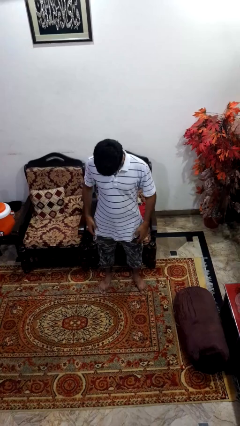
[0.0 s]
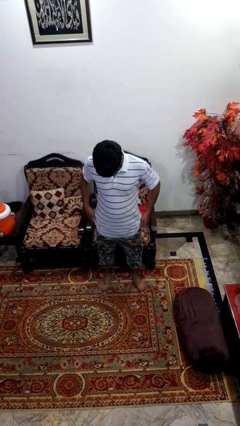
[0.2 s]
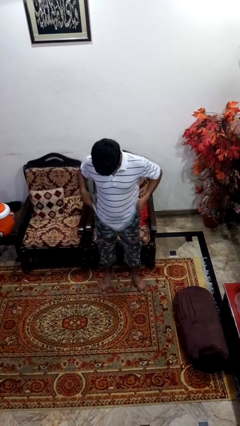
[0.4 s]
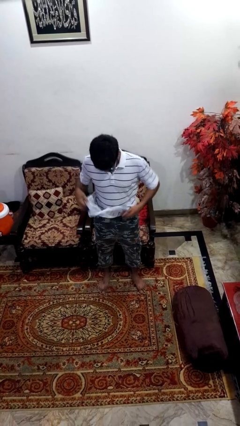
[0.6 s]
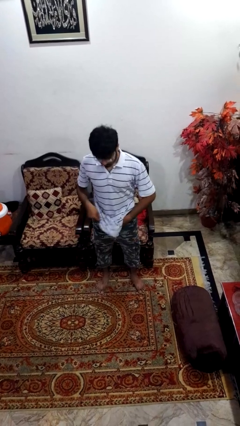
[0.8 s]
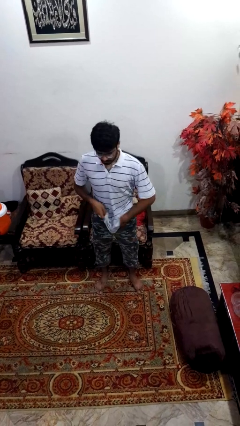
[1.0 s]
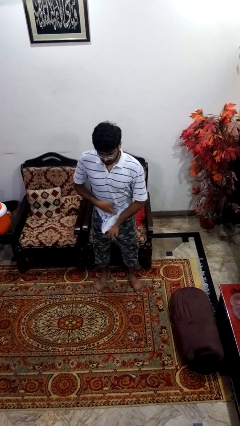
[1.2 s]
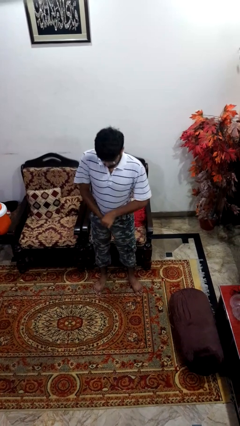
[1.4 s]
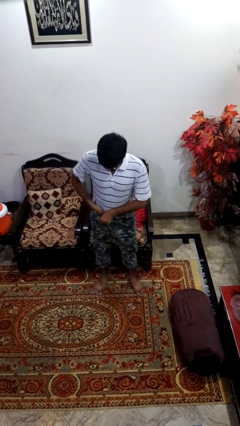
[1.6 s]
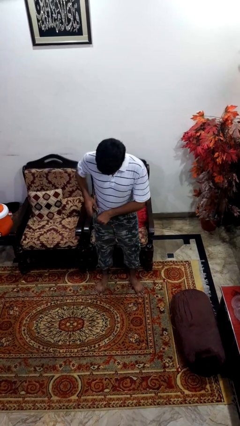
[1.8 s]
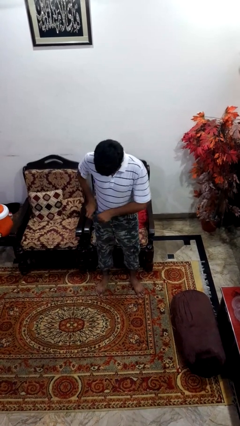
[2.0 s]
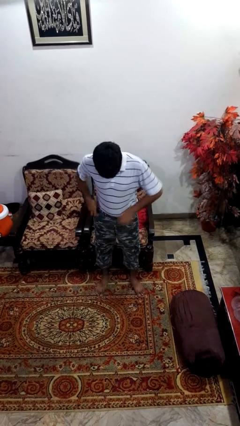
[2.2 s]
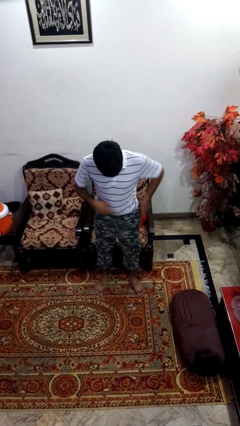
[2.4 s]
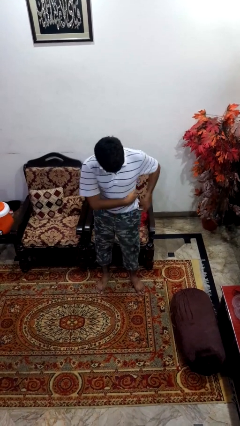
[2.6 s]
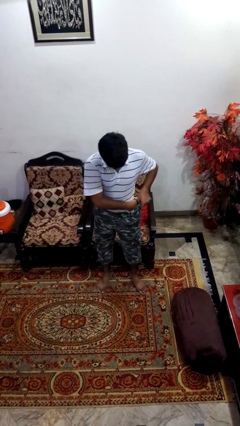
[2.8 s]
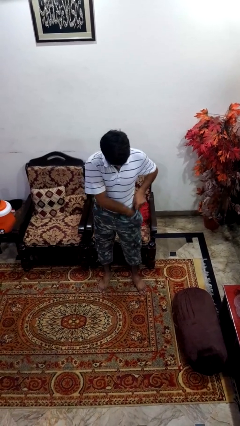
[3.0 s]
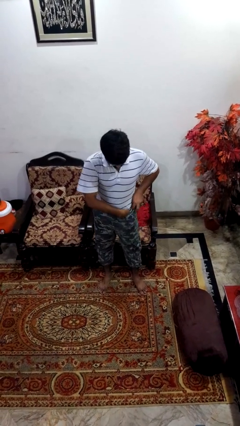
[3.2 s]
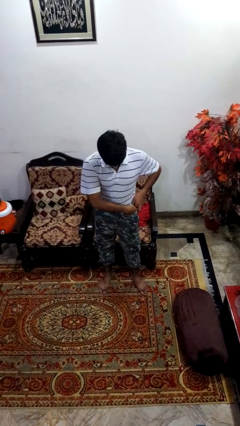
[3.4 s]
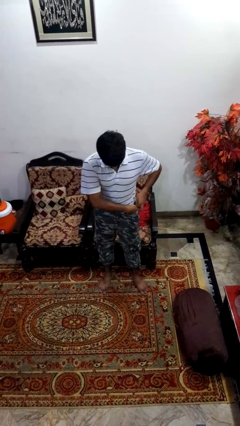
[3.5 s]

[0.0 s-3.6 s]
person tucks in shirt

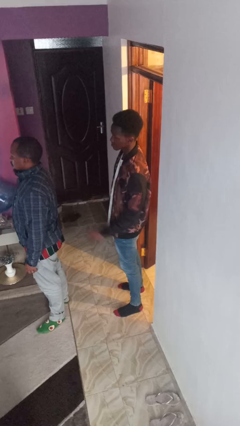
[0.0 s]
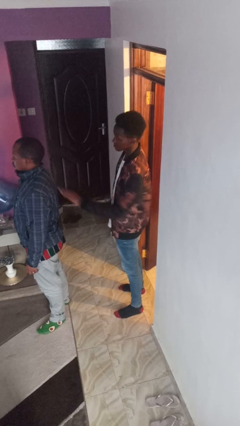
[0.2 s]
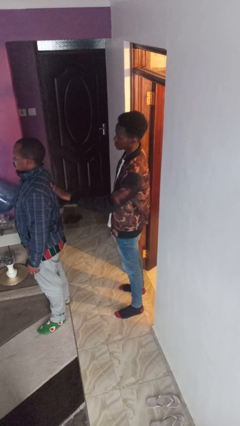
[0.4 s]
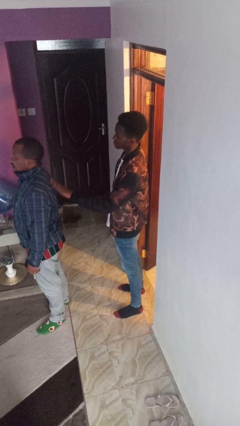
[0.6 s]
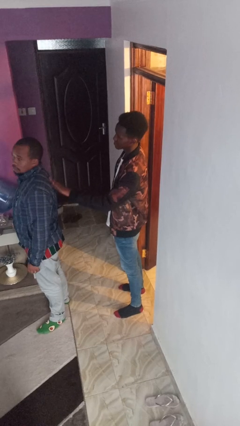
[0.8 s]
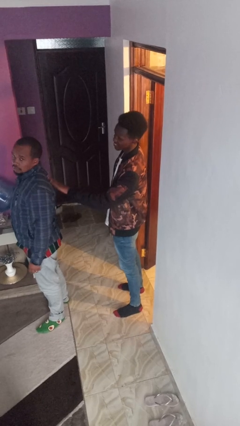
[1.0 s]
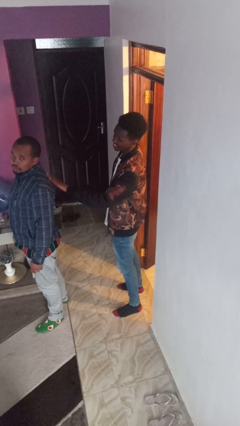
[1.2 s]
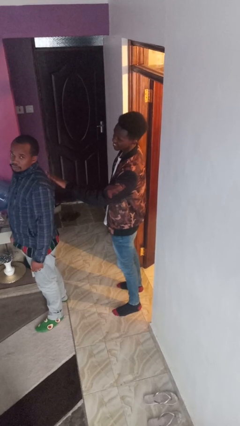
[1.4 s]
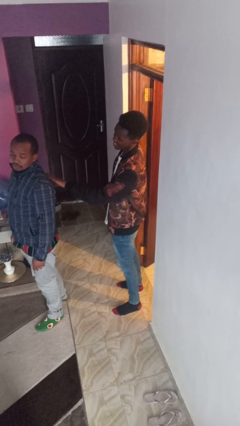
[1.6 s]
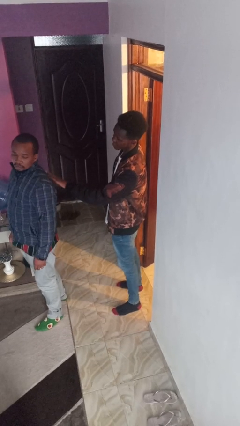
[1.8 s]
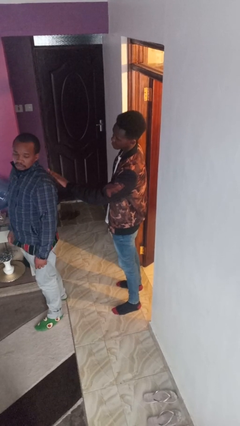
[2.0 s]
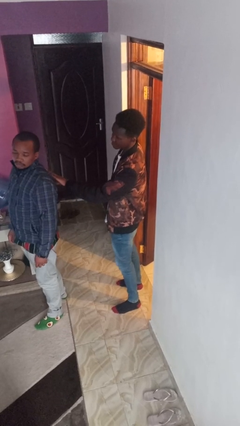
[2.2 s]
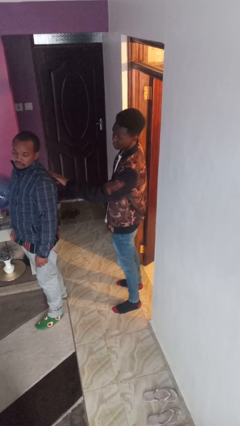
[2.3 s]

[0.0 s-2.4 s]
person touches back of person

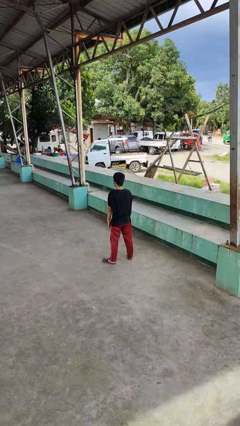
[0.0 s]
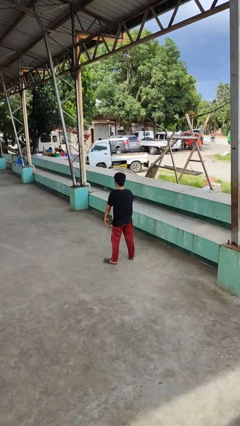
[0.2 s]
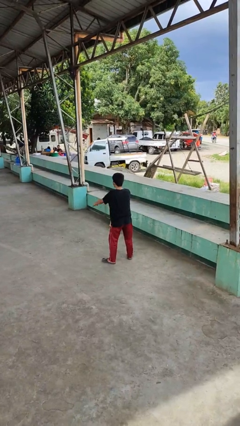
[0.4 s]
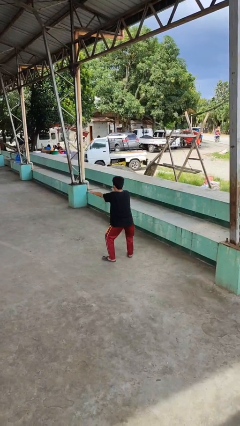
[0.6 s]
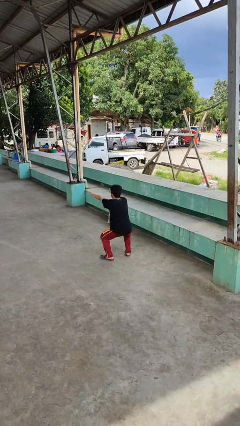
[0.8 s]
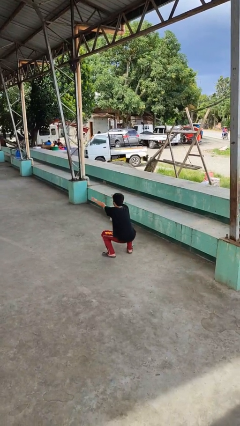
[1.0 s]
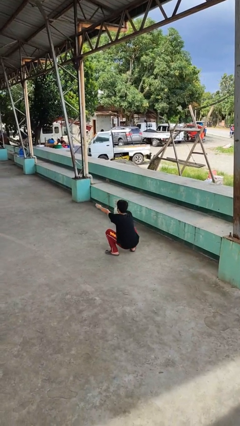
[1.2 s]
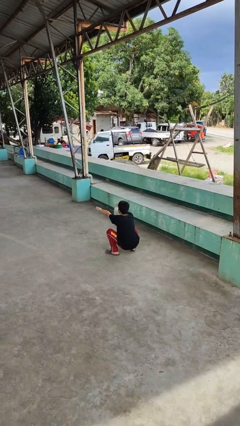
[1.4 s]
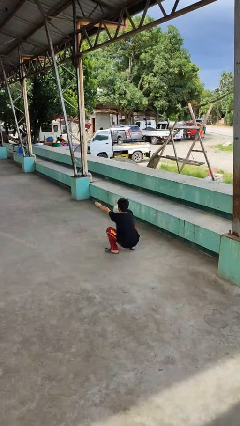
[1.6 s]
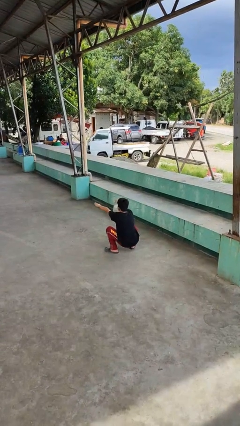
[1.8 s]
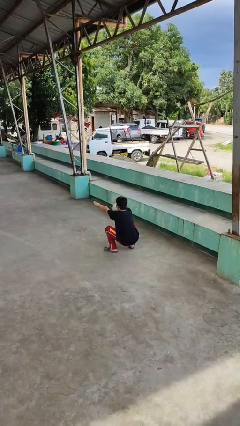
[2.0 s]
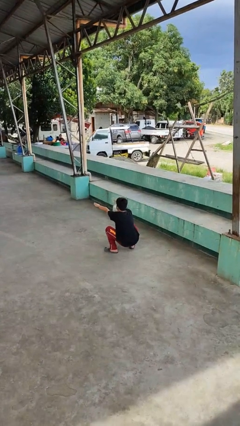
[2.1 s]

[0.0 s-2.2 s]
person squats

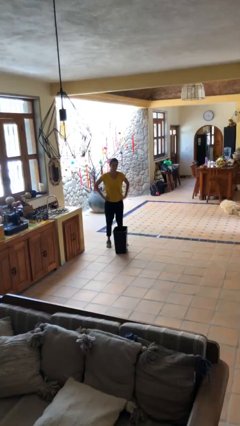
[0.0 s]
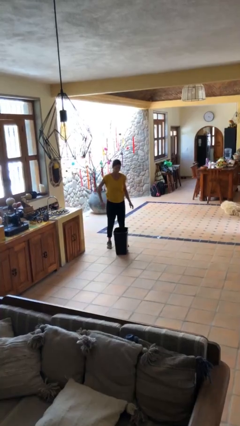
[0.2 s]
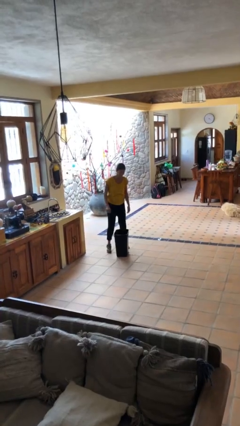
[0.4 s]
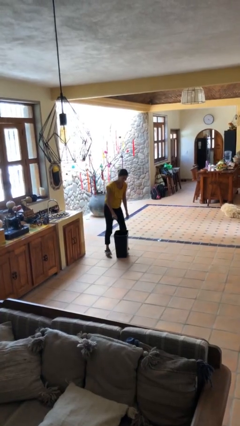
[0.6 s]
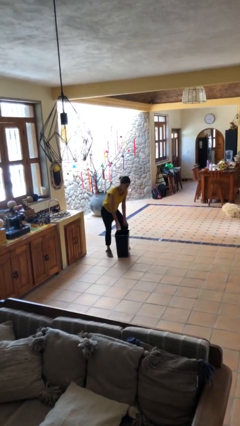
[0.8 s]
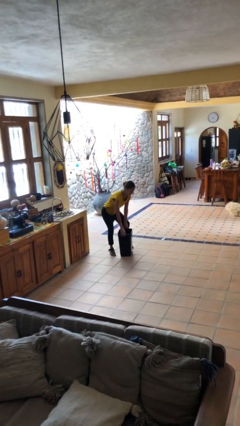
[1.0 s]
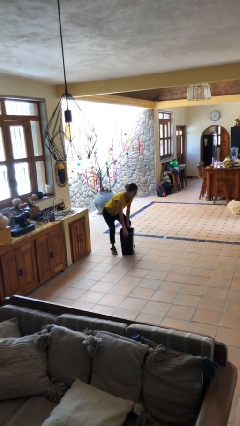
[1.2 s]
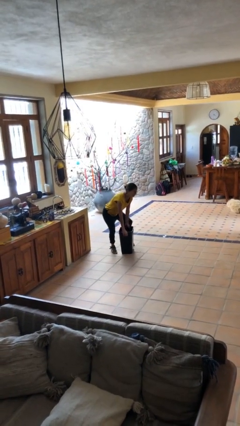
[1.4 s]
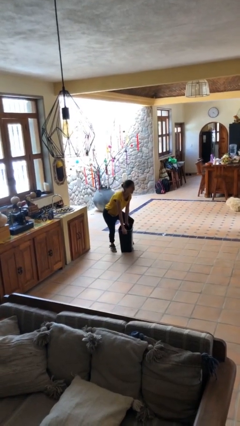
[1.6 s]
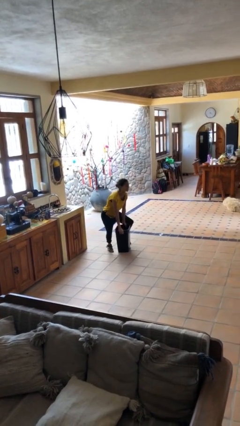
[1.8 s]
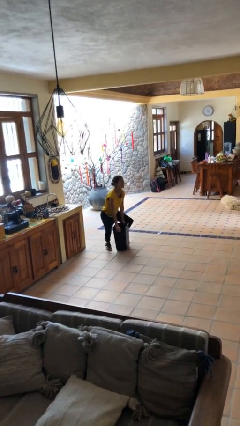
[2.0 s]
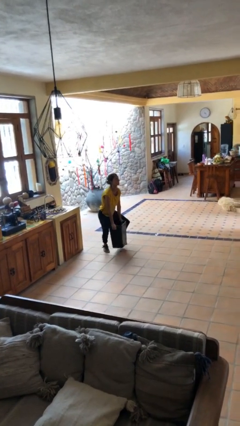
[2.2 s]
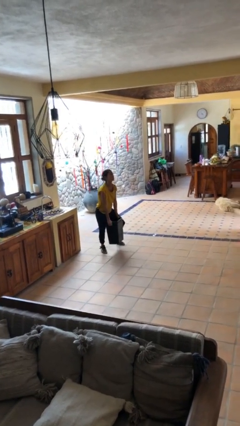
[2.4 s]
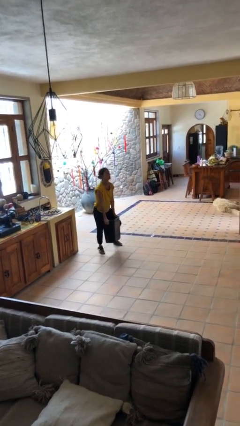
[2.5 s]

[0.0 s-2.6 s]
person picks up object from floor

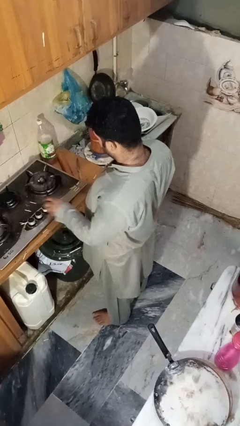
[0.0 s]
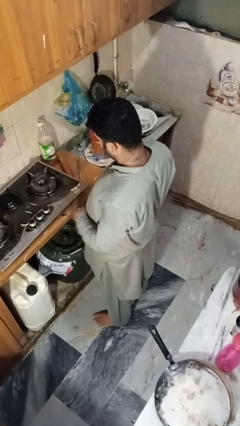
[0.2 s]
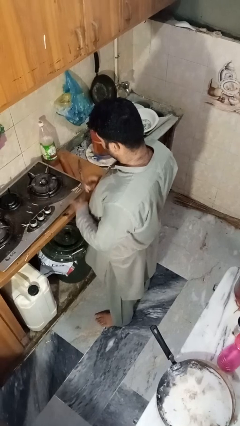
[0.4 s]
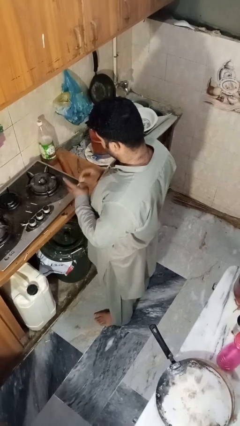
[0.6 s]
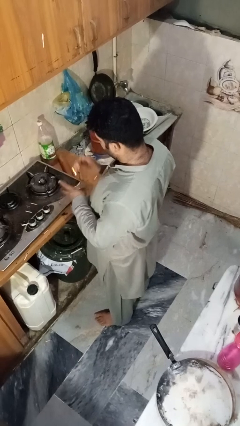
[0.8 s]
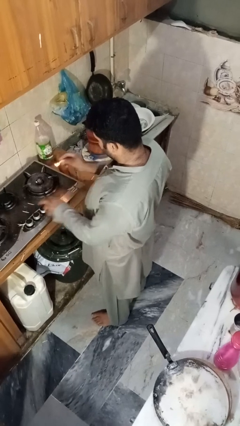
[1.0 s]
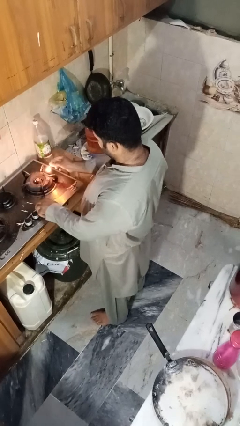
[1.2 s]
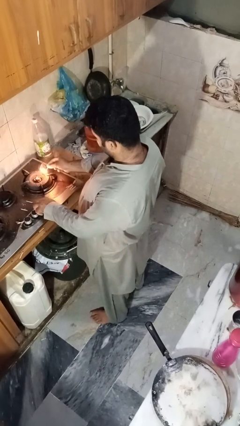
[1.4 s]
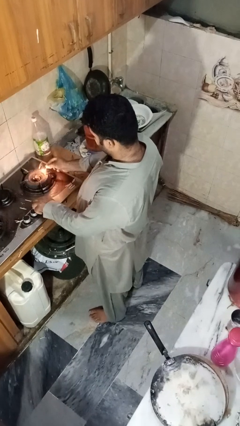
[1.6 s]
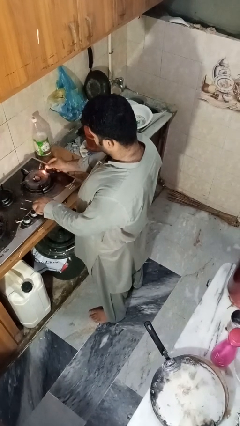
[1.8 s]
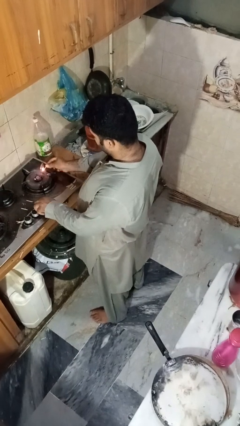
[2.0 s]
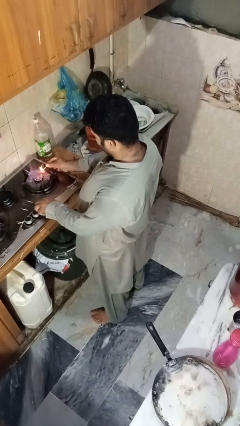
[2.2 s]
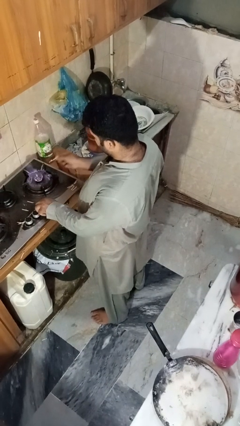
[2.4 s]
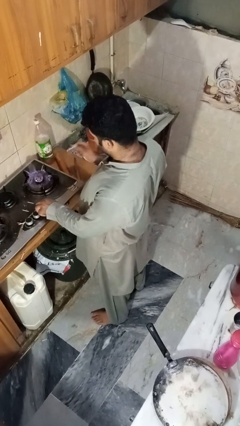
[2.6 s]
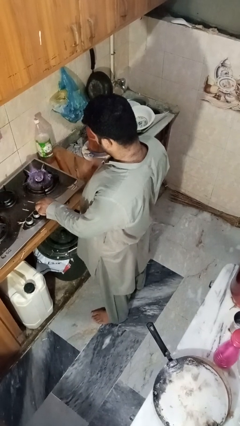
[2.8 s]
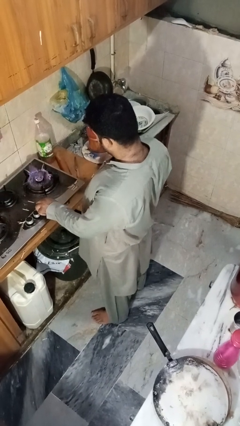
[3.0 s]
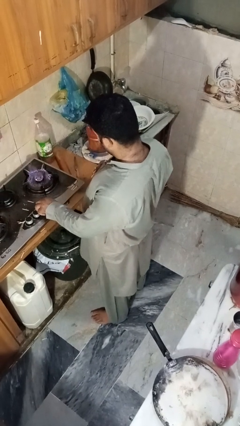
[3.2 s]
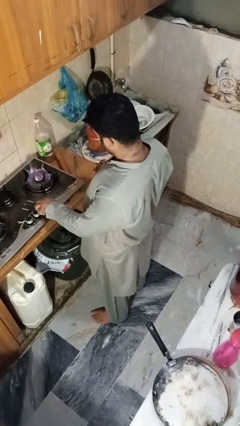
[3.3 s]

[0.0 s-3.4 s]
person turns on stovetop

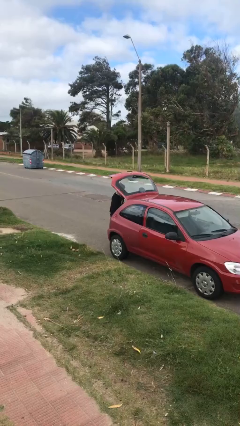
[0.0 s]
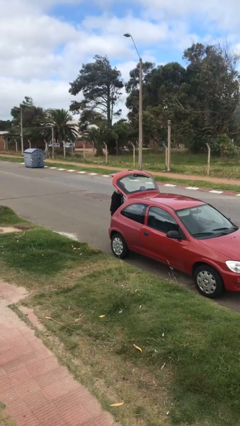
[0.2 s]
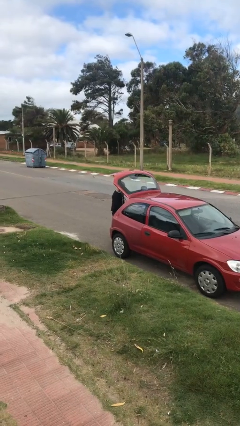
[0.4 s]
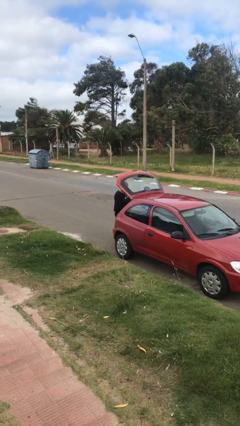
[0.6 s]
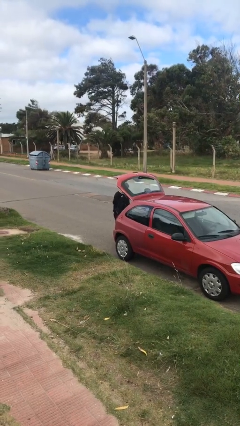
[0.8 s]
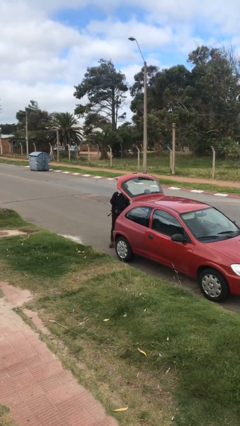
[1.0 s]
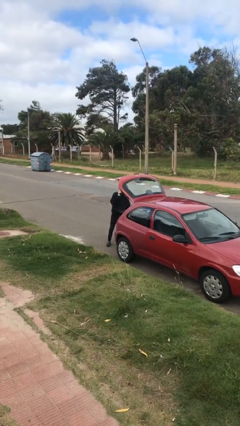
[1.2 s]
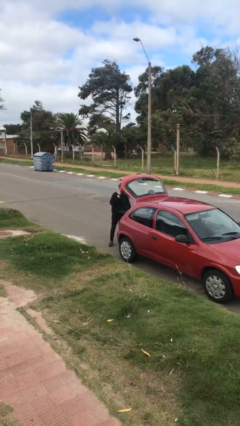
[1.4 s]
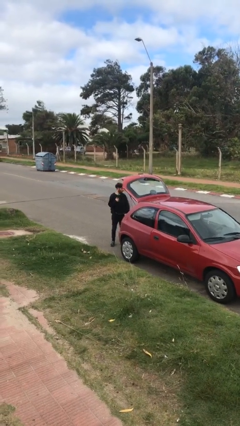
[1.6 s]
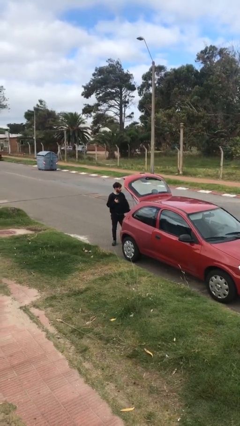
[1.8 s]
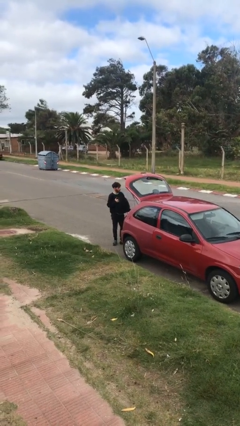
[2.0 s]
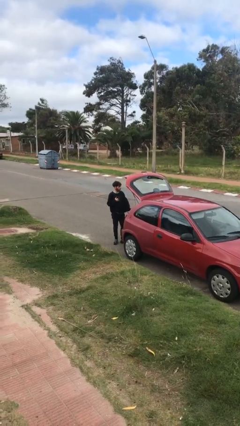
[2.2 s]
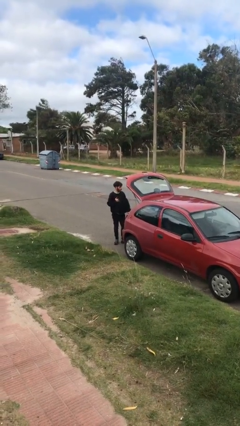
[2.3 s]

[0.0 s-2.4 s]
person unloads car

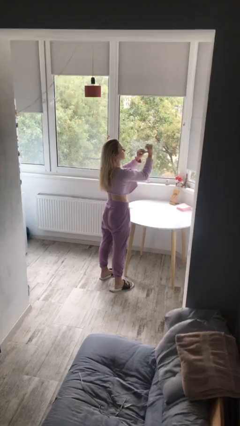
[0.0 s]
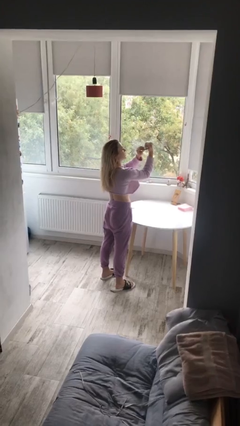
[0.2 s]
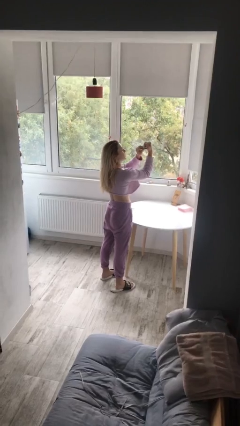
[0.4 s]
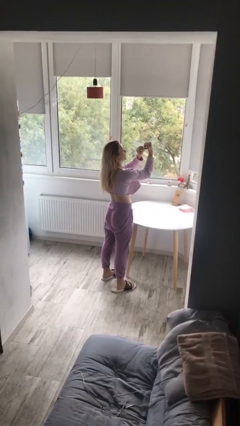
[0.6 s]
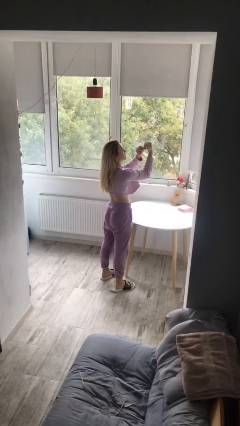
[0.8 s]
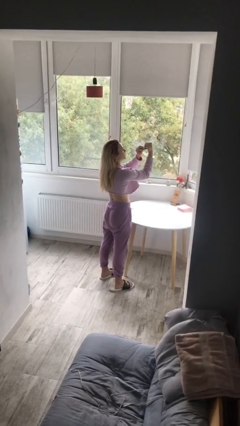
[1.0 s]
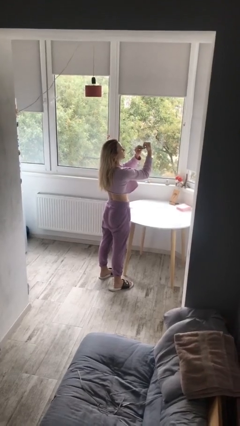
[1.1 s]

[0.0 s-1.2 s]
person files fingernails
